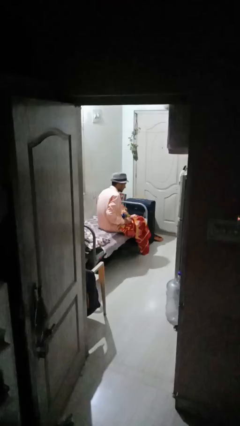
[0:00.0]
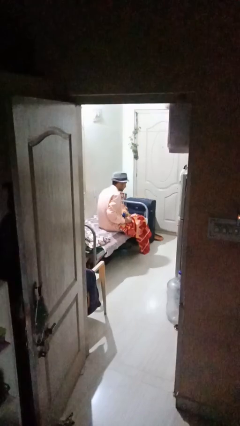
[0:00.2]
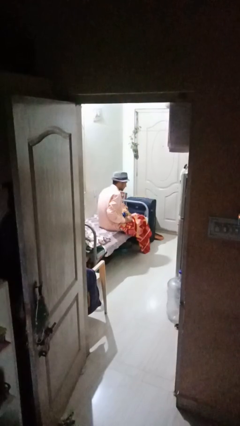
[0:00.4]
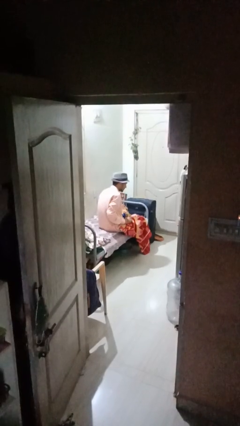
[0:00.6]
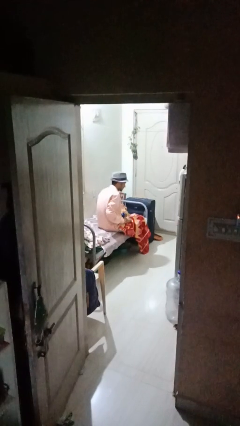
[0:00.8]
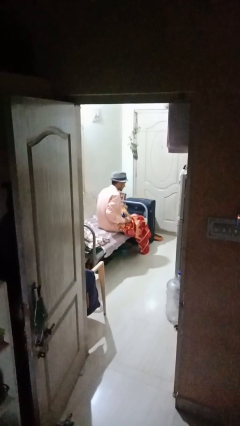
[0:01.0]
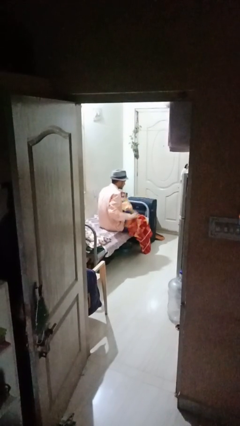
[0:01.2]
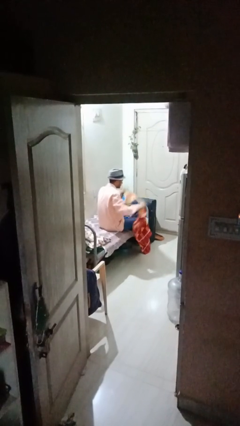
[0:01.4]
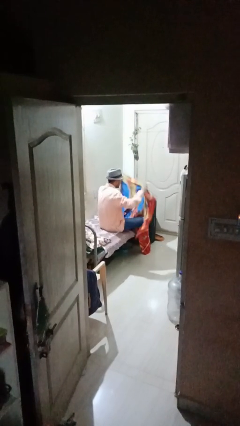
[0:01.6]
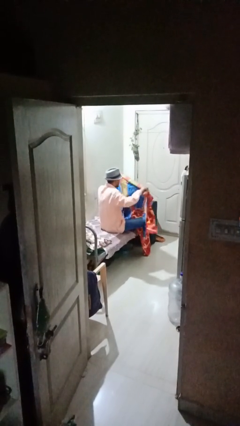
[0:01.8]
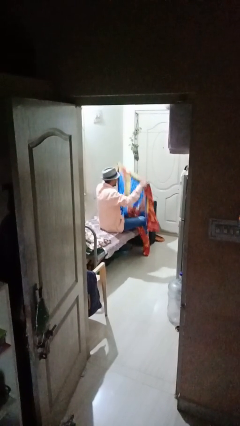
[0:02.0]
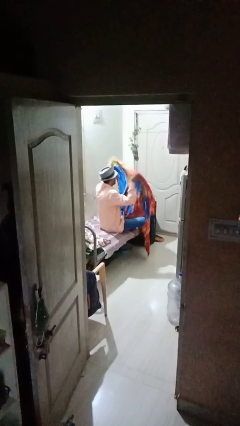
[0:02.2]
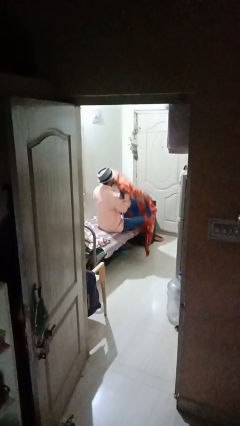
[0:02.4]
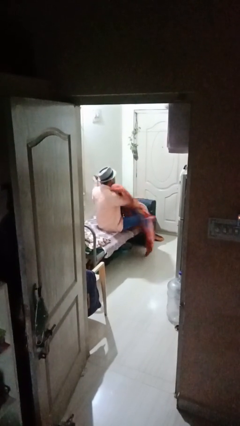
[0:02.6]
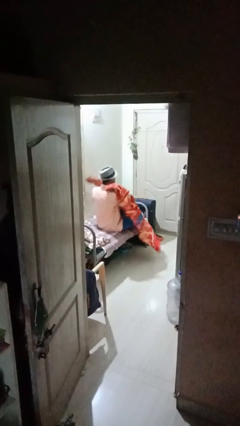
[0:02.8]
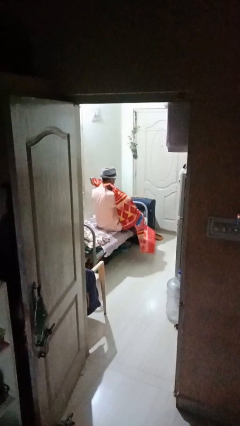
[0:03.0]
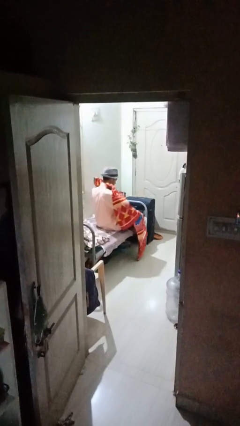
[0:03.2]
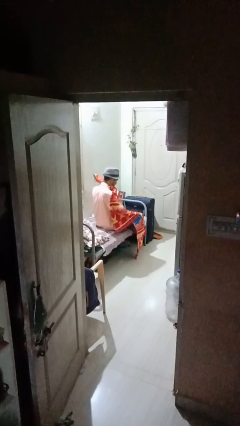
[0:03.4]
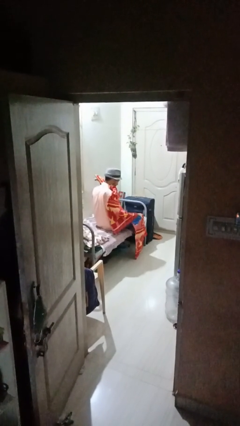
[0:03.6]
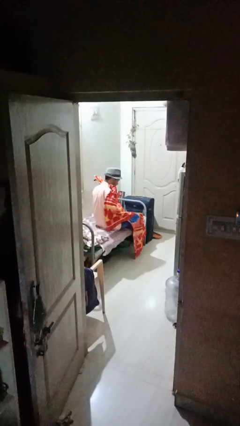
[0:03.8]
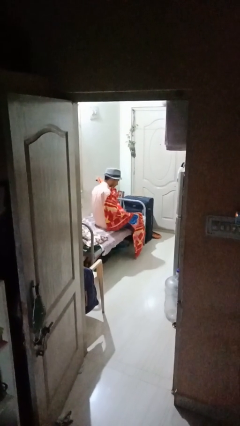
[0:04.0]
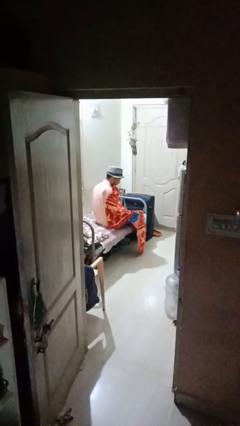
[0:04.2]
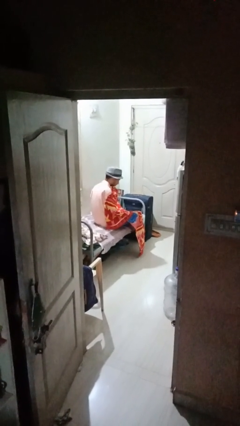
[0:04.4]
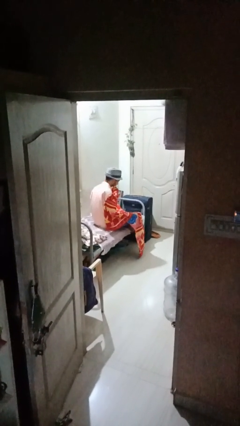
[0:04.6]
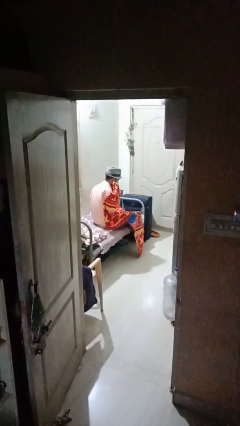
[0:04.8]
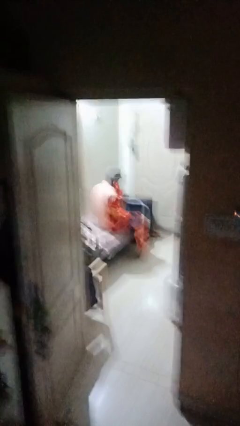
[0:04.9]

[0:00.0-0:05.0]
person covers with blanket

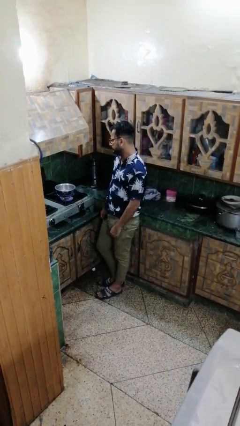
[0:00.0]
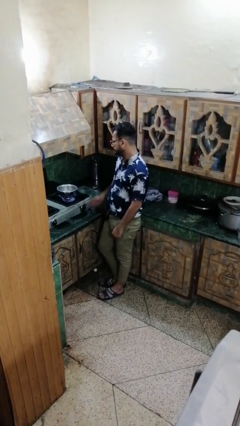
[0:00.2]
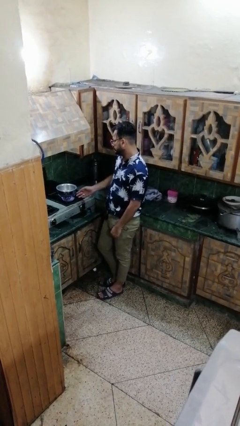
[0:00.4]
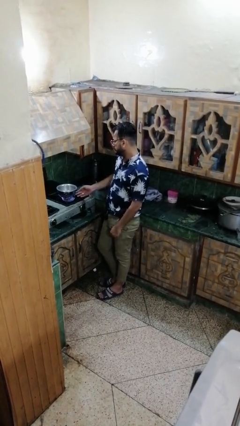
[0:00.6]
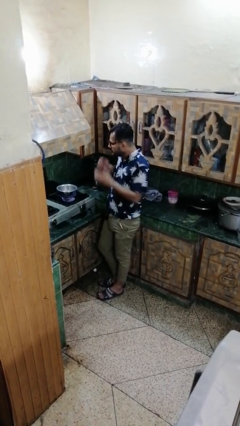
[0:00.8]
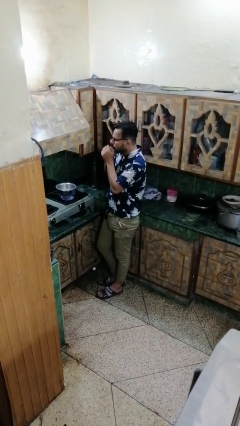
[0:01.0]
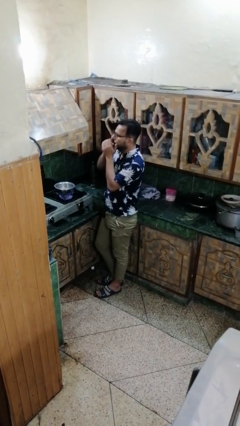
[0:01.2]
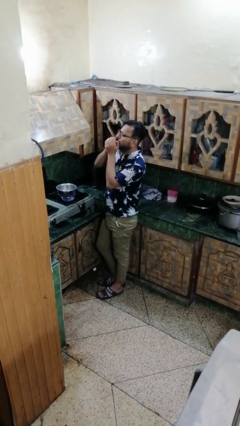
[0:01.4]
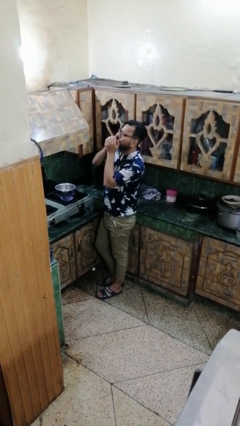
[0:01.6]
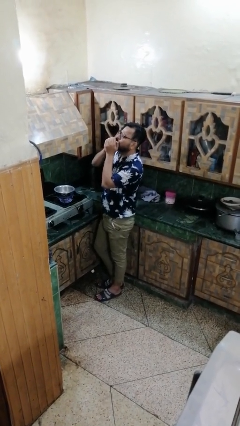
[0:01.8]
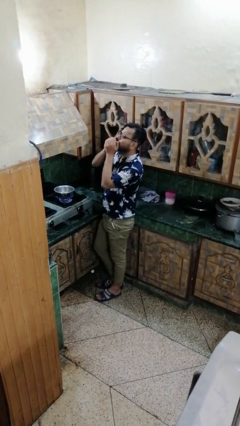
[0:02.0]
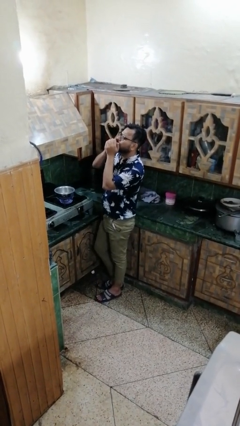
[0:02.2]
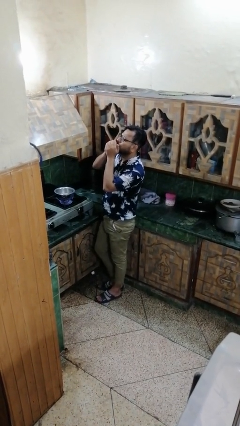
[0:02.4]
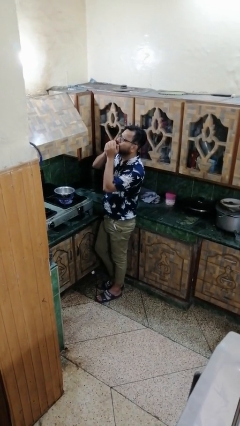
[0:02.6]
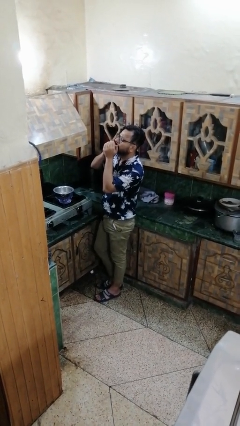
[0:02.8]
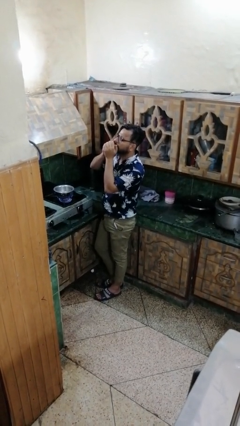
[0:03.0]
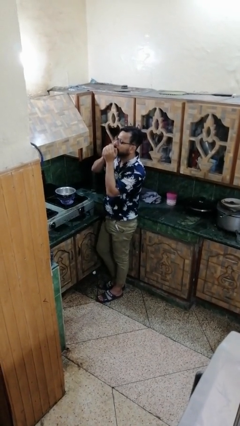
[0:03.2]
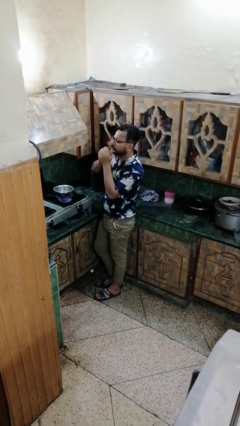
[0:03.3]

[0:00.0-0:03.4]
person burns hand

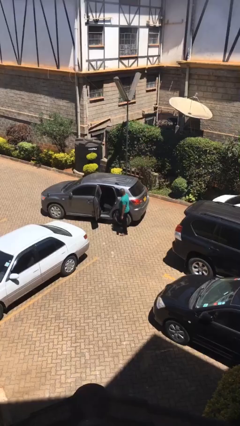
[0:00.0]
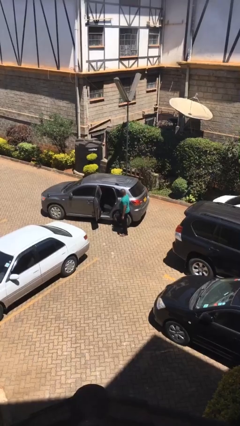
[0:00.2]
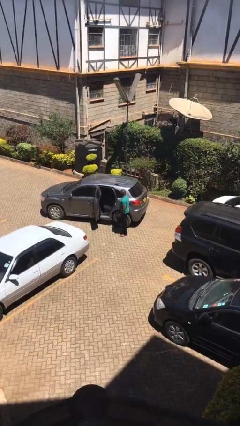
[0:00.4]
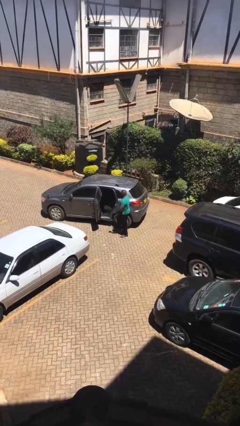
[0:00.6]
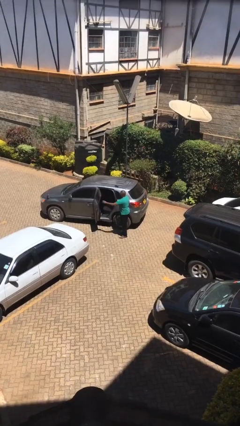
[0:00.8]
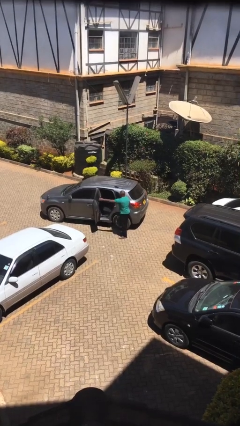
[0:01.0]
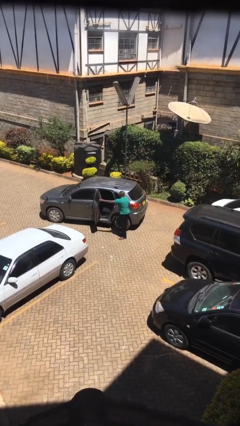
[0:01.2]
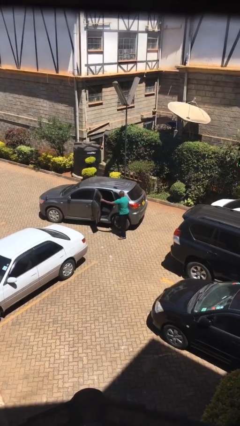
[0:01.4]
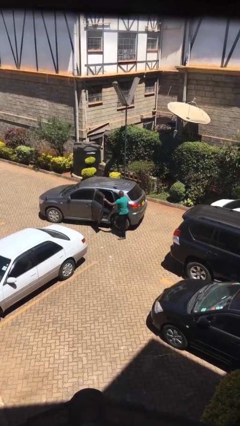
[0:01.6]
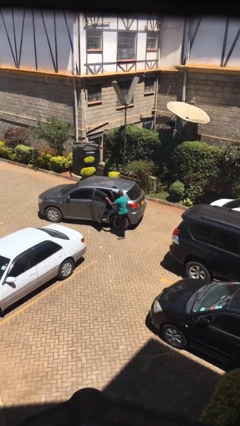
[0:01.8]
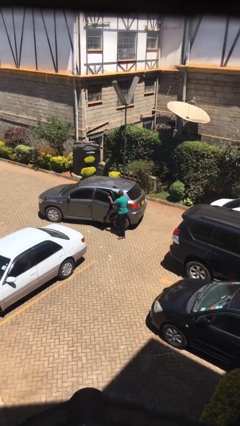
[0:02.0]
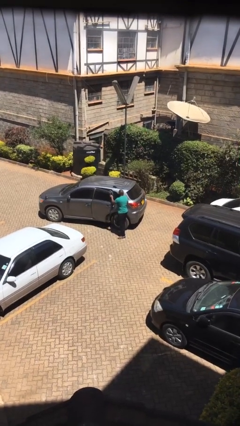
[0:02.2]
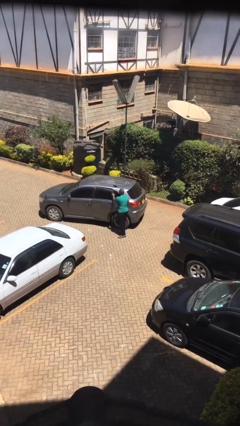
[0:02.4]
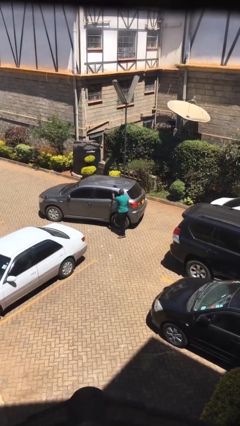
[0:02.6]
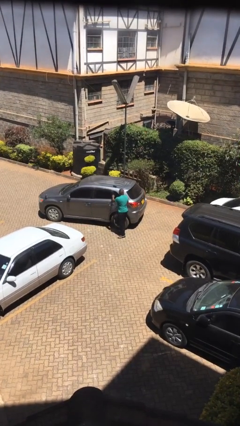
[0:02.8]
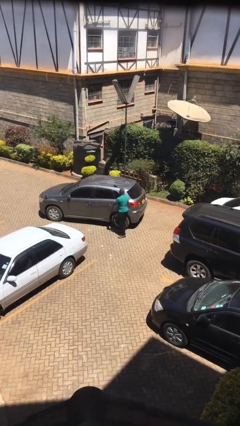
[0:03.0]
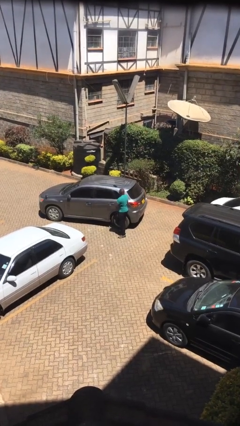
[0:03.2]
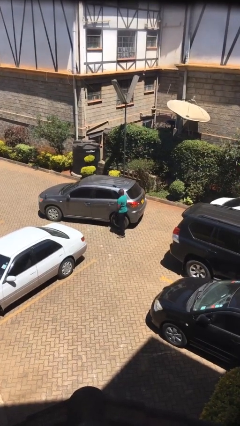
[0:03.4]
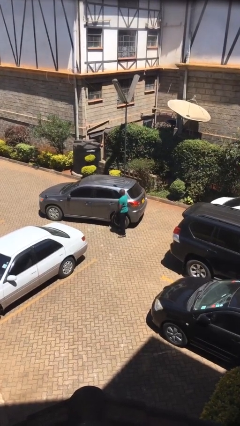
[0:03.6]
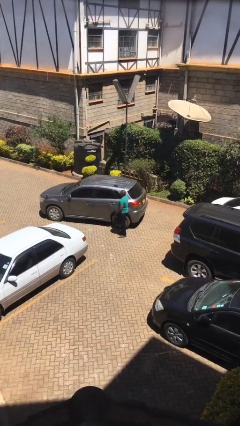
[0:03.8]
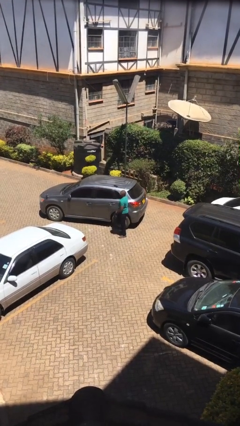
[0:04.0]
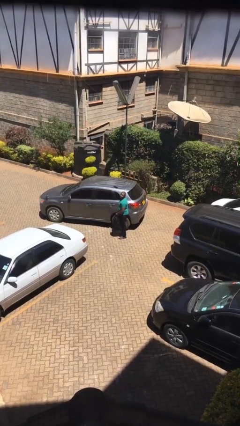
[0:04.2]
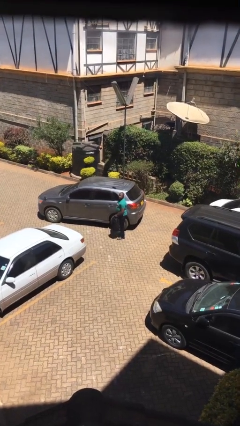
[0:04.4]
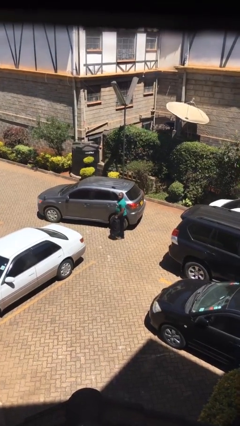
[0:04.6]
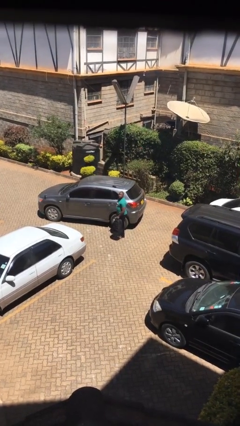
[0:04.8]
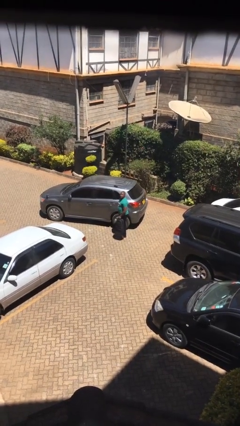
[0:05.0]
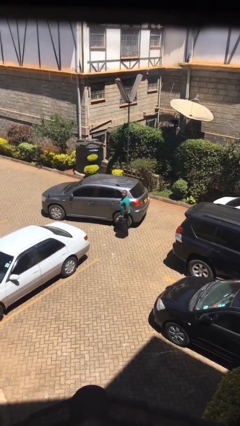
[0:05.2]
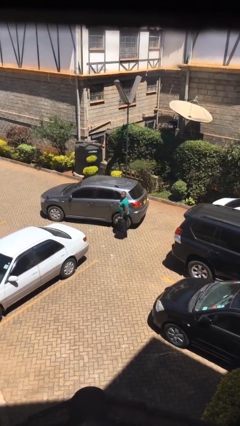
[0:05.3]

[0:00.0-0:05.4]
person closes car door

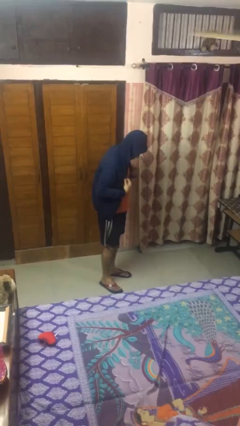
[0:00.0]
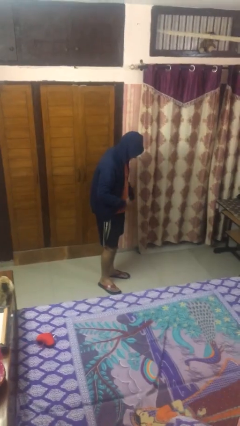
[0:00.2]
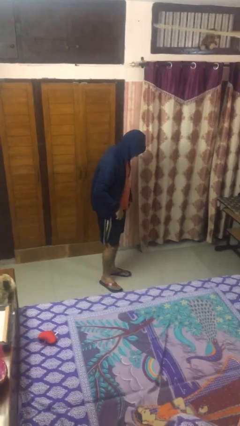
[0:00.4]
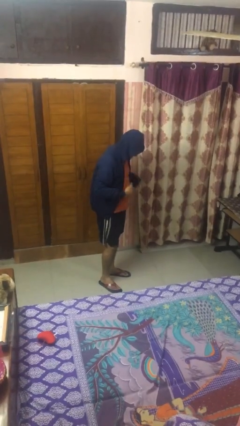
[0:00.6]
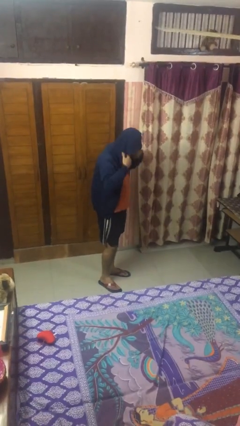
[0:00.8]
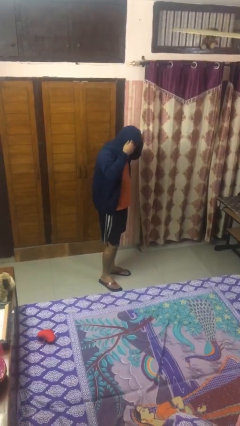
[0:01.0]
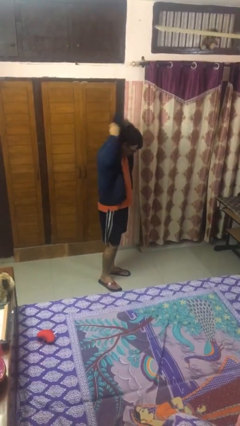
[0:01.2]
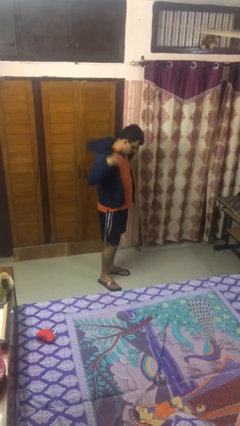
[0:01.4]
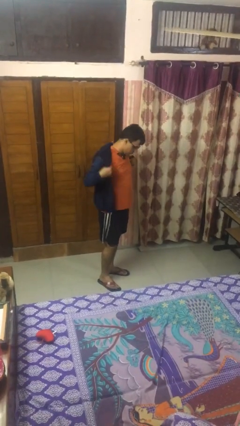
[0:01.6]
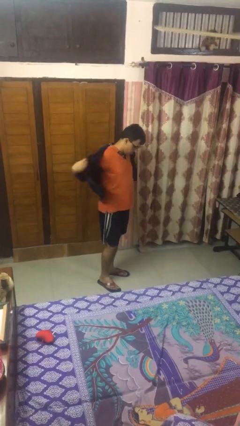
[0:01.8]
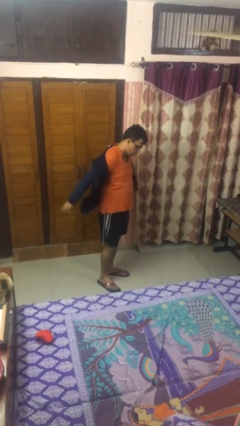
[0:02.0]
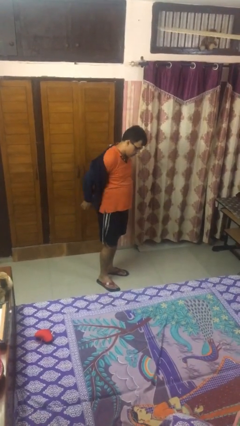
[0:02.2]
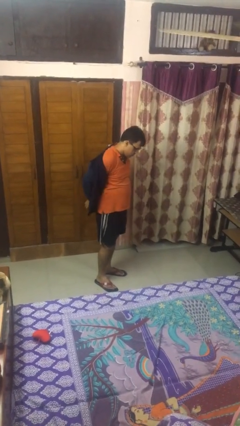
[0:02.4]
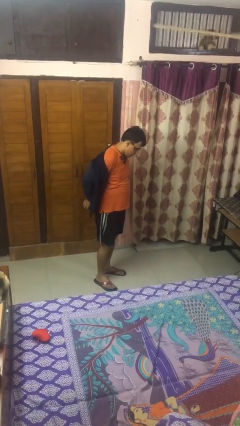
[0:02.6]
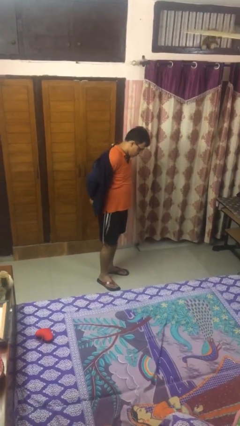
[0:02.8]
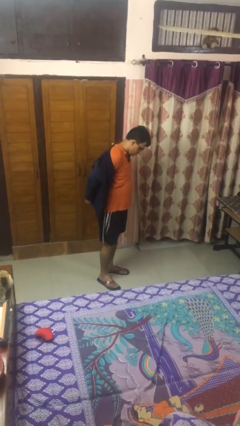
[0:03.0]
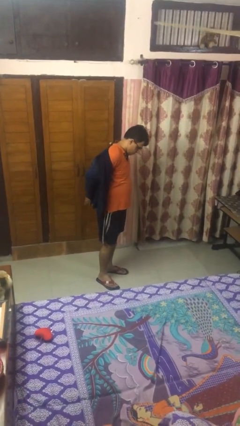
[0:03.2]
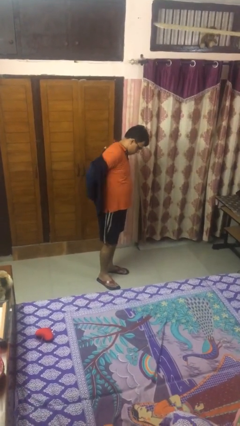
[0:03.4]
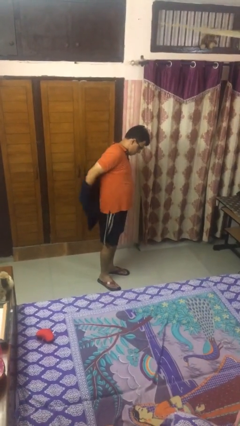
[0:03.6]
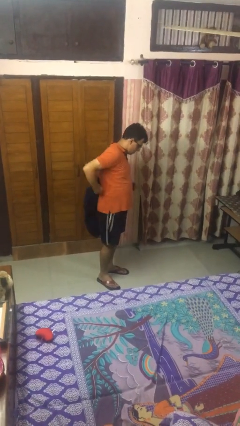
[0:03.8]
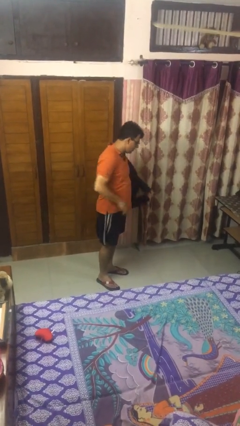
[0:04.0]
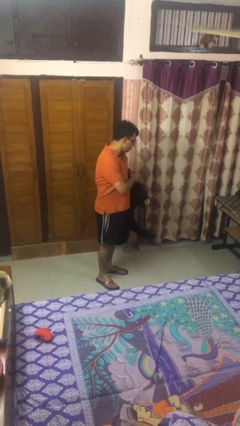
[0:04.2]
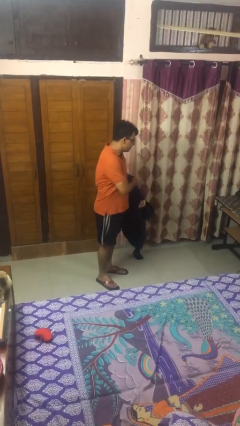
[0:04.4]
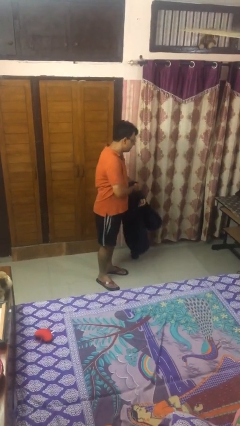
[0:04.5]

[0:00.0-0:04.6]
person takes off hoodie
